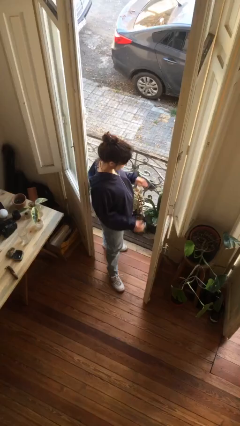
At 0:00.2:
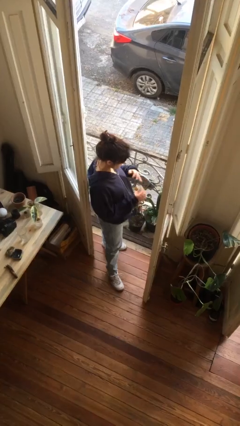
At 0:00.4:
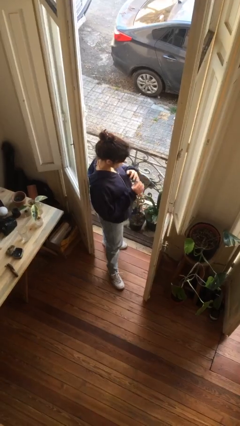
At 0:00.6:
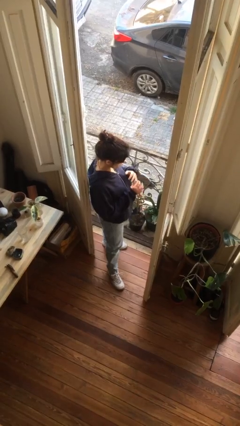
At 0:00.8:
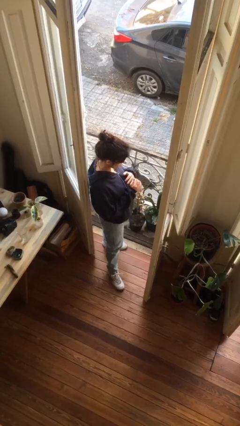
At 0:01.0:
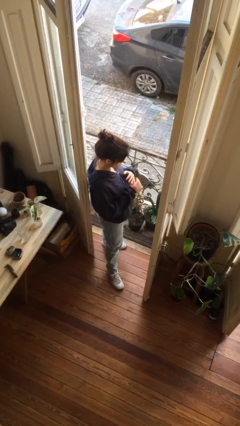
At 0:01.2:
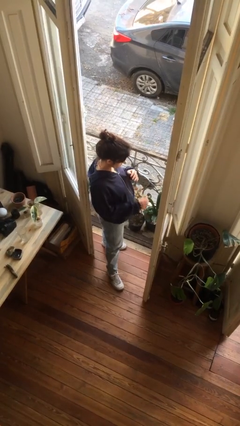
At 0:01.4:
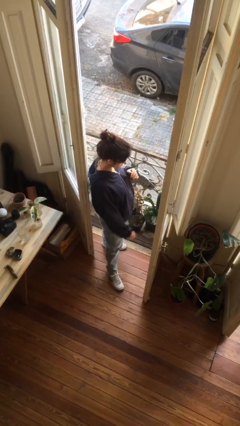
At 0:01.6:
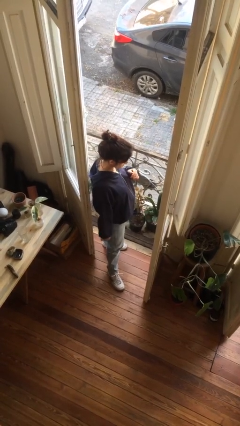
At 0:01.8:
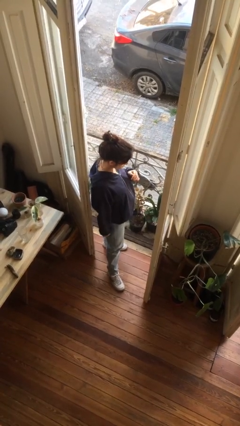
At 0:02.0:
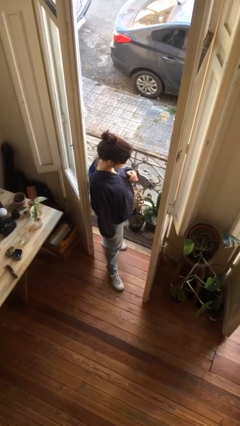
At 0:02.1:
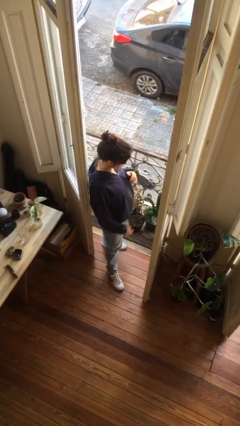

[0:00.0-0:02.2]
person puts on ring

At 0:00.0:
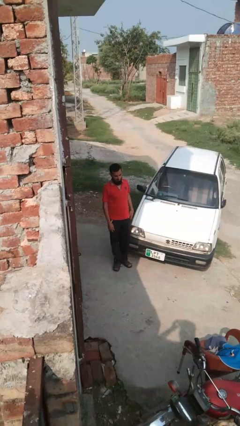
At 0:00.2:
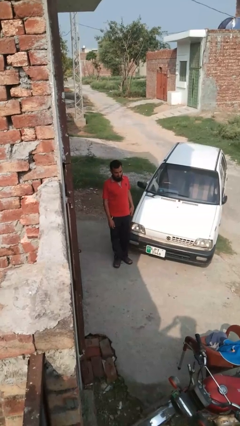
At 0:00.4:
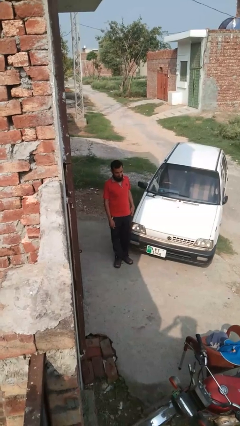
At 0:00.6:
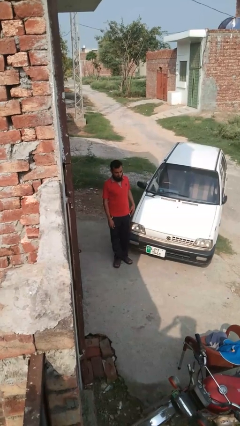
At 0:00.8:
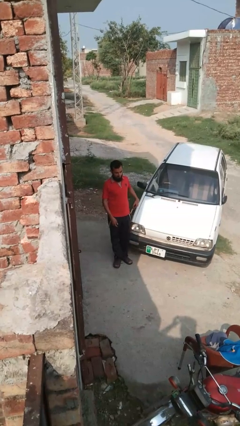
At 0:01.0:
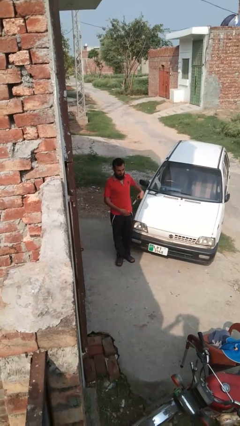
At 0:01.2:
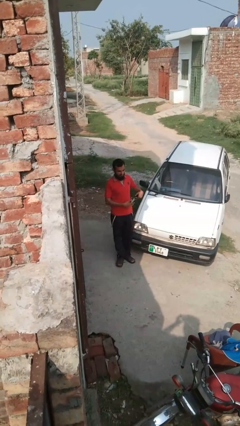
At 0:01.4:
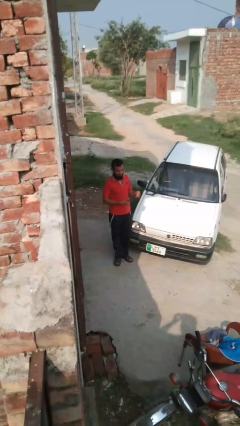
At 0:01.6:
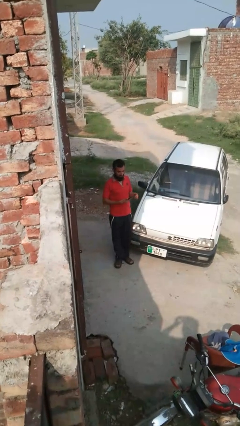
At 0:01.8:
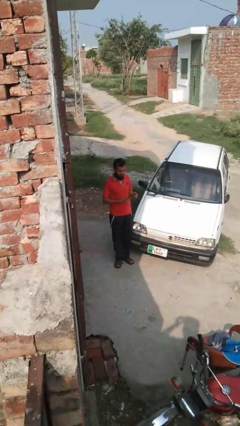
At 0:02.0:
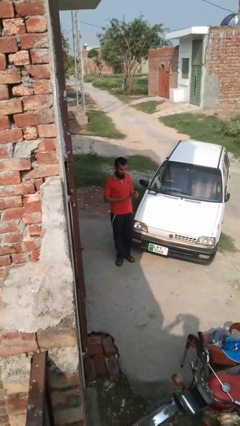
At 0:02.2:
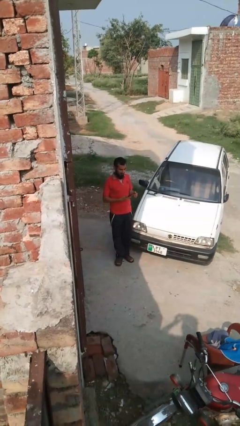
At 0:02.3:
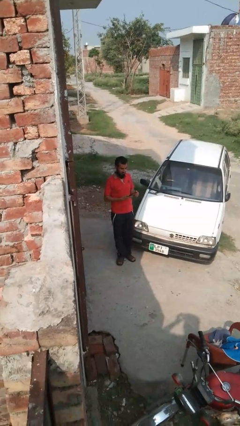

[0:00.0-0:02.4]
person takes phone from pocket

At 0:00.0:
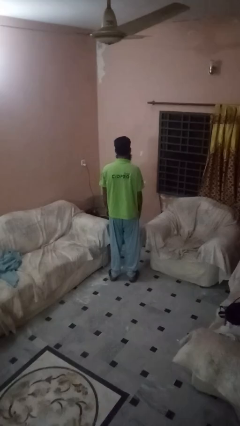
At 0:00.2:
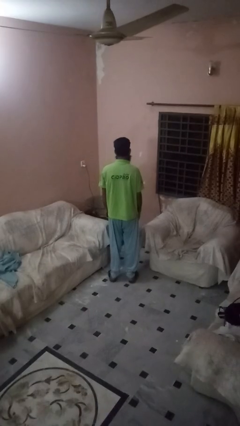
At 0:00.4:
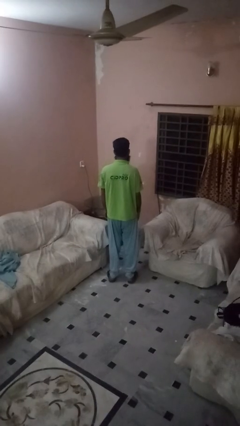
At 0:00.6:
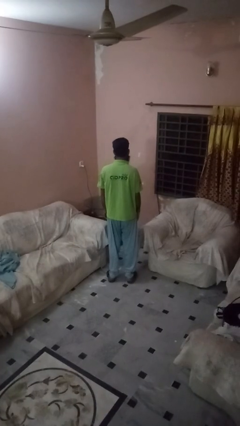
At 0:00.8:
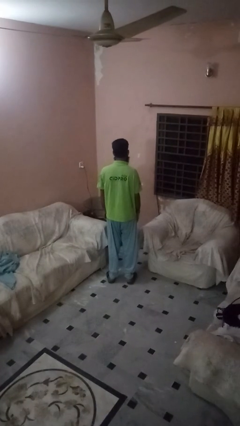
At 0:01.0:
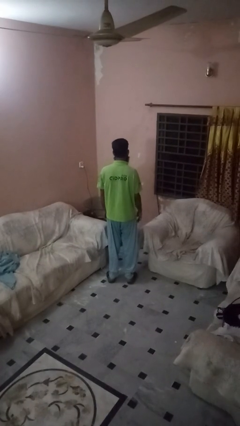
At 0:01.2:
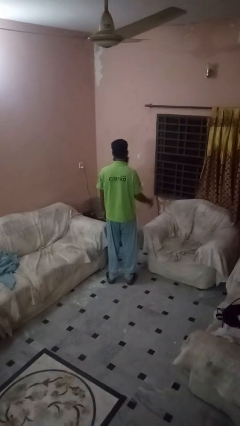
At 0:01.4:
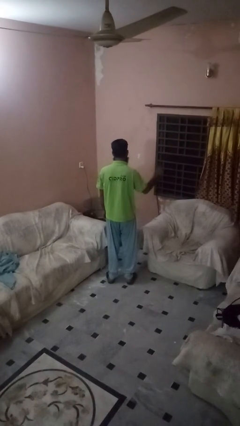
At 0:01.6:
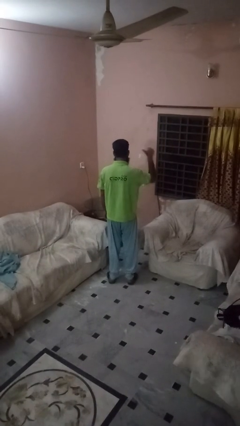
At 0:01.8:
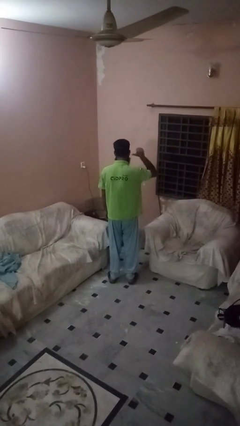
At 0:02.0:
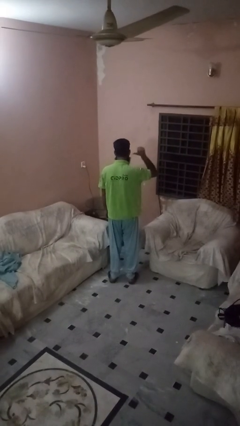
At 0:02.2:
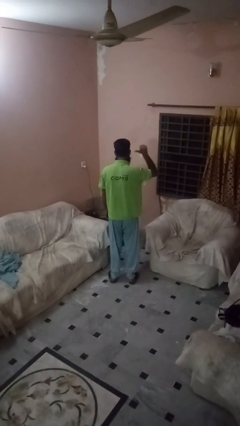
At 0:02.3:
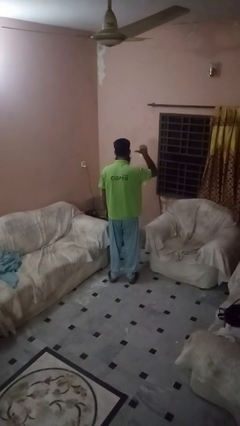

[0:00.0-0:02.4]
person gestures behind me

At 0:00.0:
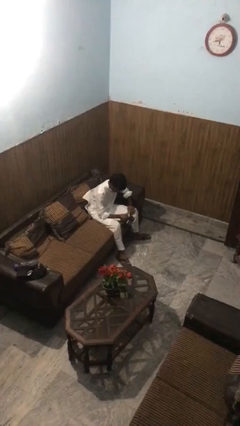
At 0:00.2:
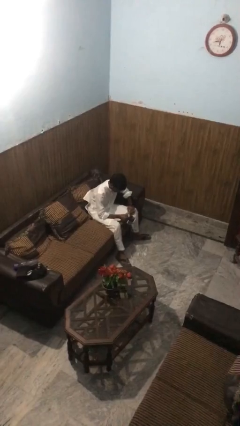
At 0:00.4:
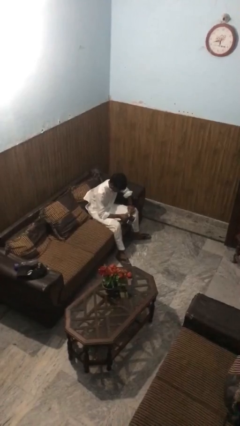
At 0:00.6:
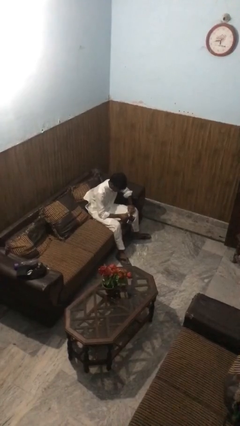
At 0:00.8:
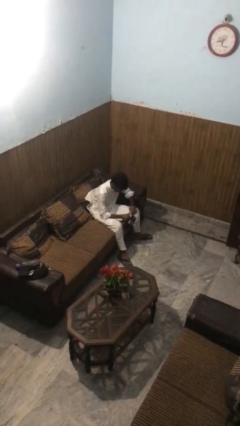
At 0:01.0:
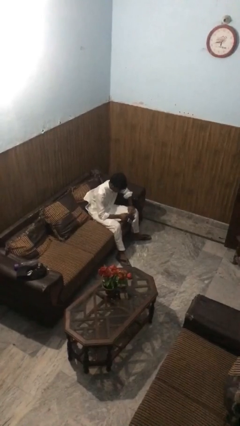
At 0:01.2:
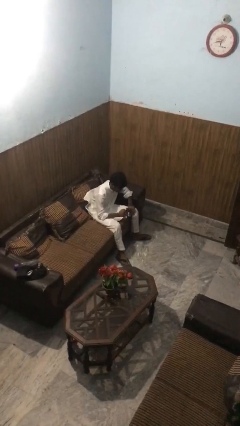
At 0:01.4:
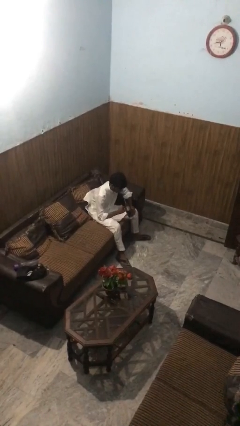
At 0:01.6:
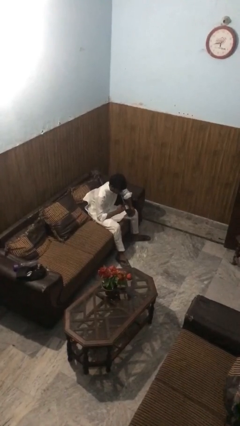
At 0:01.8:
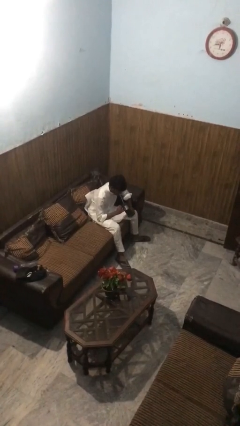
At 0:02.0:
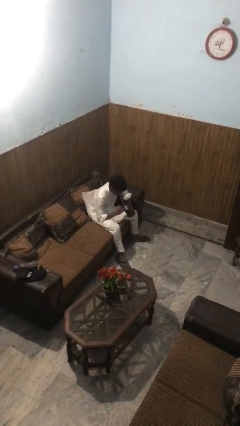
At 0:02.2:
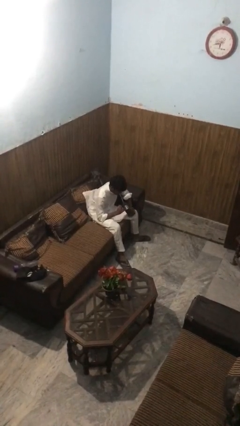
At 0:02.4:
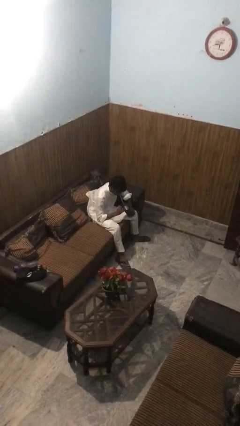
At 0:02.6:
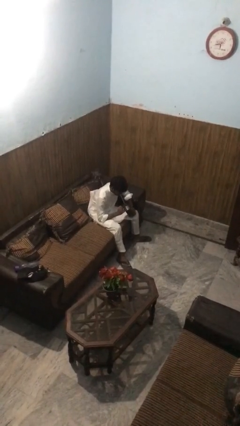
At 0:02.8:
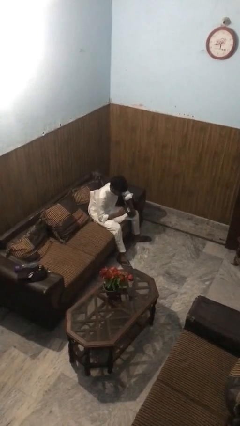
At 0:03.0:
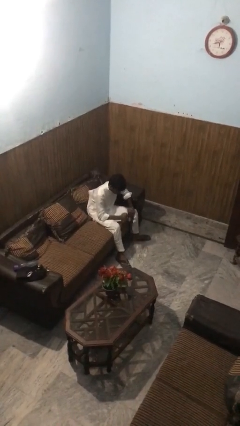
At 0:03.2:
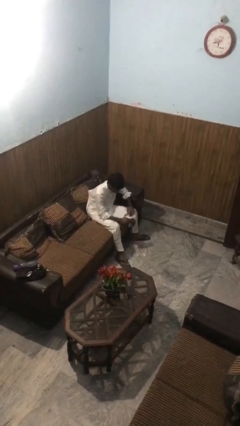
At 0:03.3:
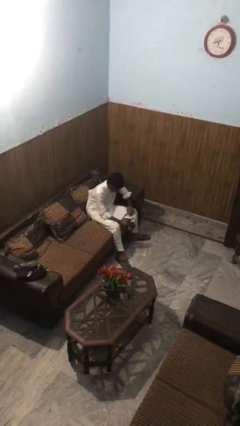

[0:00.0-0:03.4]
person drinks from straw

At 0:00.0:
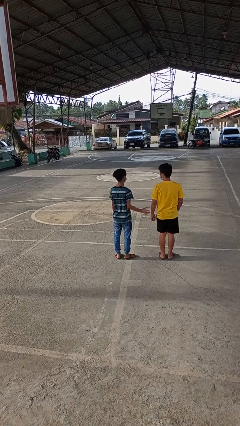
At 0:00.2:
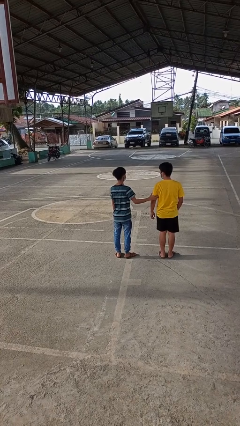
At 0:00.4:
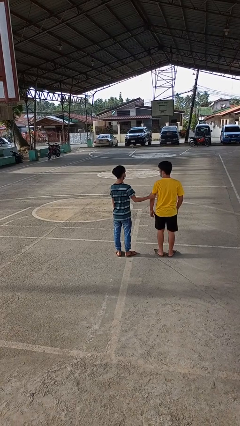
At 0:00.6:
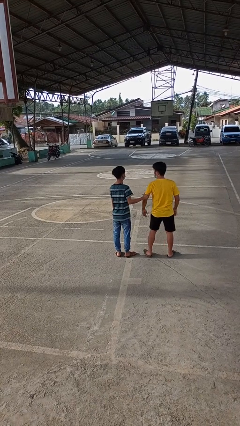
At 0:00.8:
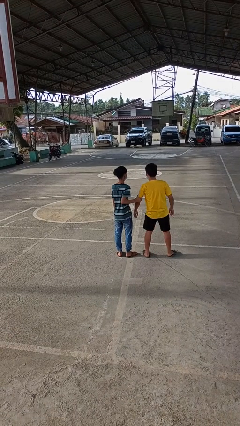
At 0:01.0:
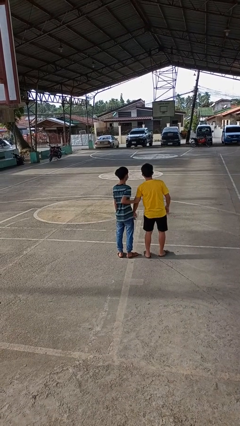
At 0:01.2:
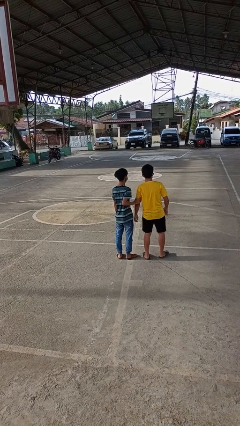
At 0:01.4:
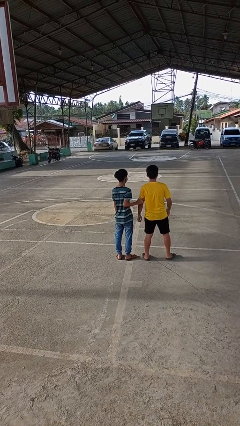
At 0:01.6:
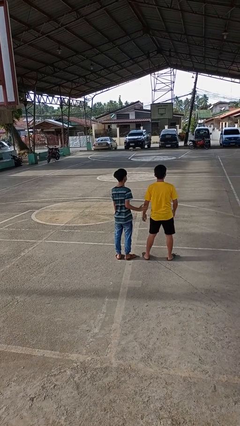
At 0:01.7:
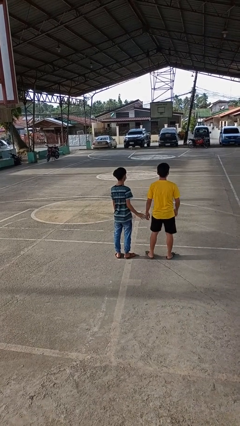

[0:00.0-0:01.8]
person grabs person by bicep

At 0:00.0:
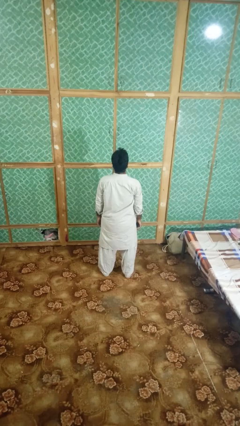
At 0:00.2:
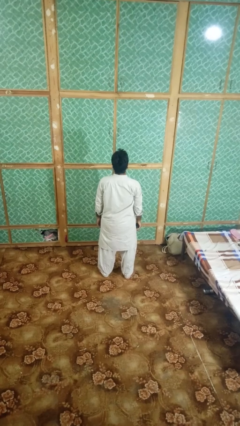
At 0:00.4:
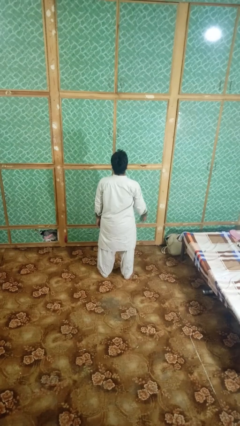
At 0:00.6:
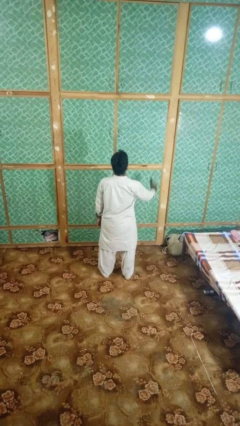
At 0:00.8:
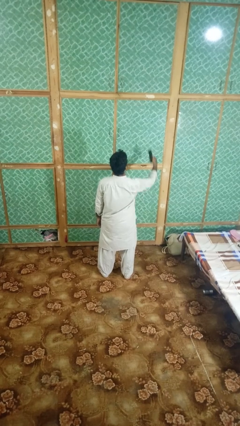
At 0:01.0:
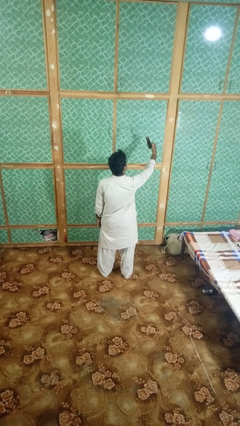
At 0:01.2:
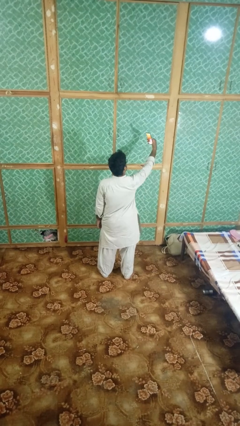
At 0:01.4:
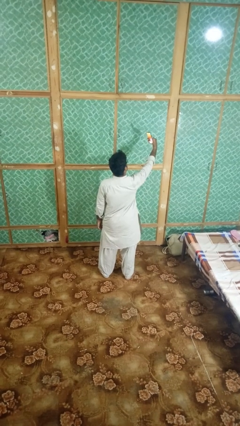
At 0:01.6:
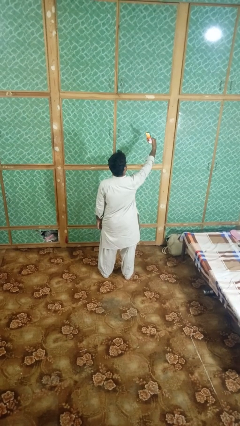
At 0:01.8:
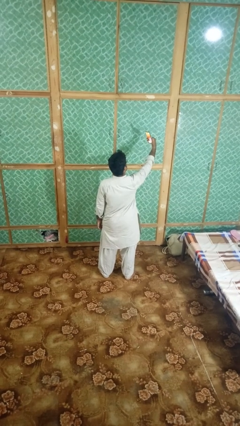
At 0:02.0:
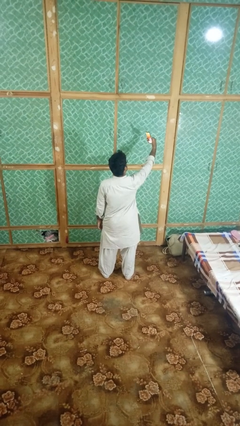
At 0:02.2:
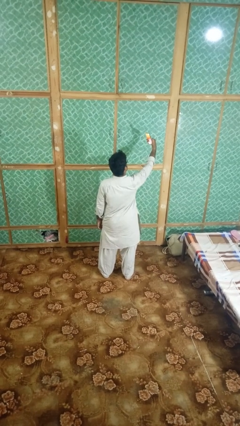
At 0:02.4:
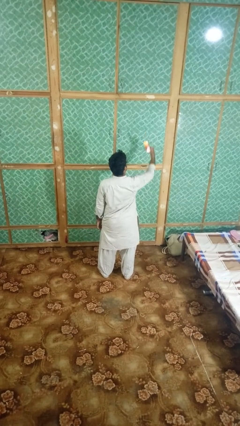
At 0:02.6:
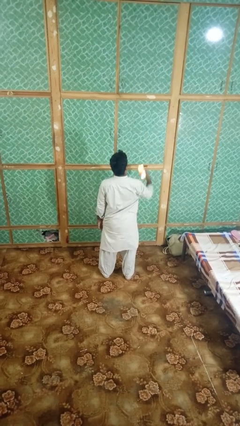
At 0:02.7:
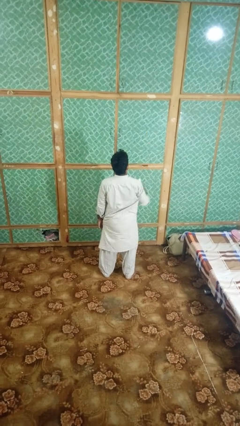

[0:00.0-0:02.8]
person takes selfie

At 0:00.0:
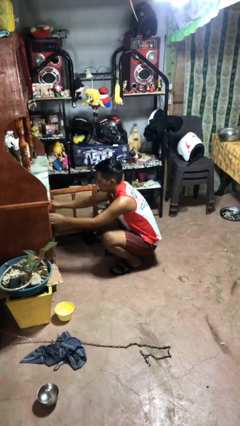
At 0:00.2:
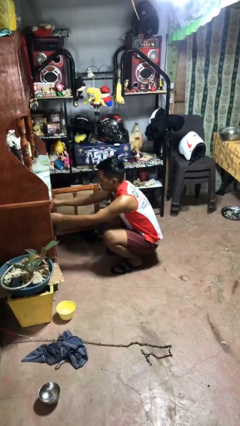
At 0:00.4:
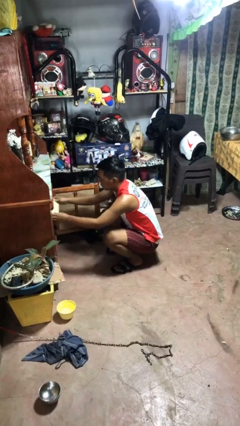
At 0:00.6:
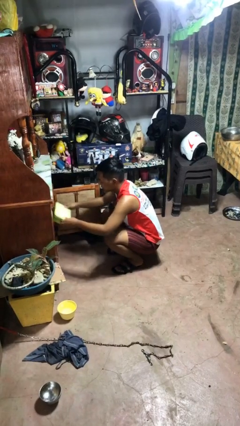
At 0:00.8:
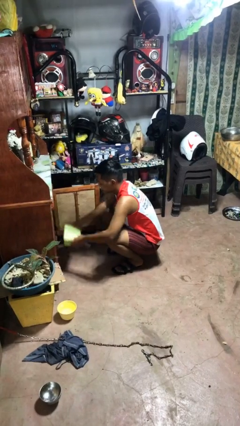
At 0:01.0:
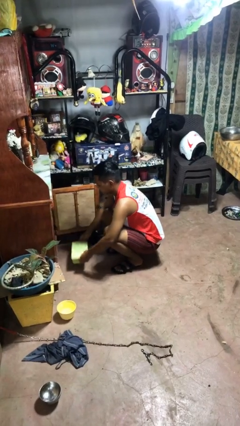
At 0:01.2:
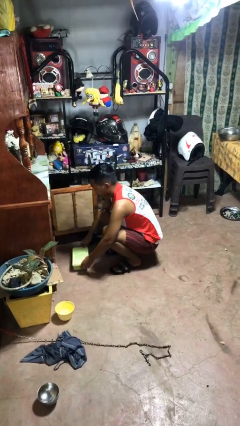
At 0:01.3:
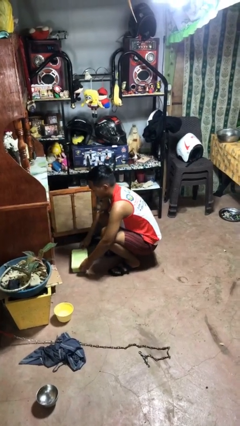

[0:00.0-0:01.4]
person takes object from cabinet

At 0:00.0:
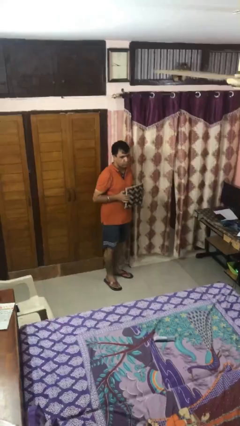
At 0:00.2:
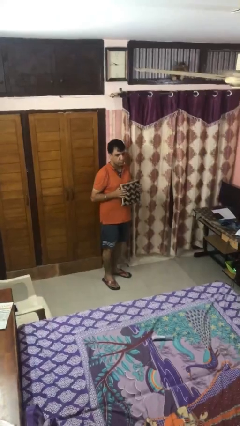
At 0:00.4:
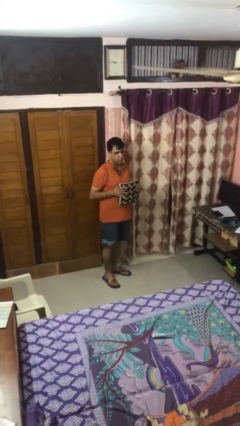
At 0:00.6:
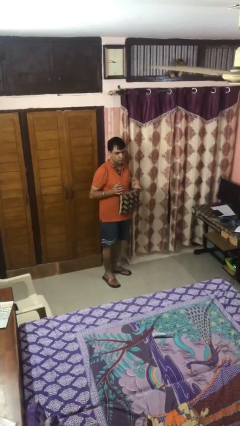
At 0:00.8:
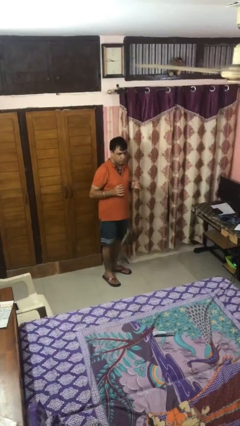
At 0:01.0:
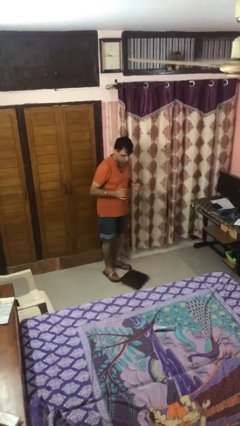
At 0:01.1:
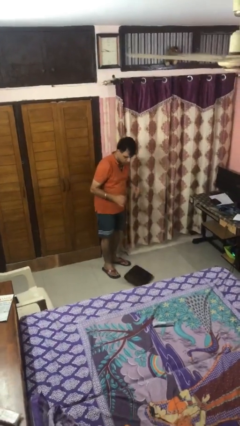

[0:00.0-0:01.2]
person drops object
